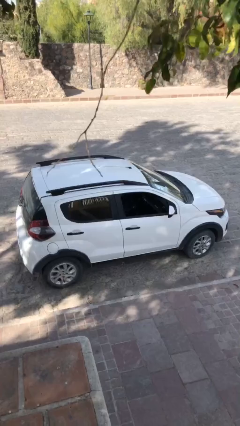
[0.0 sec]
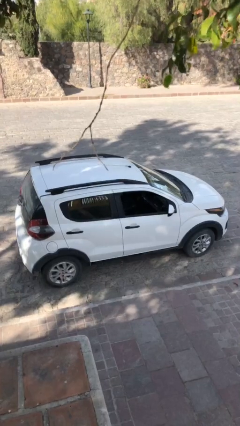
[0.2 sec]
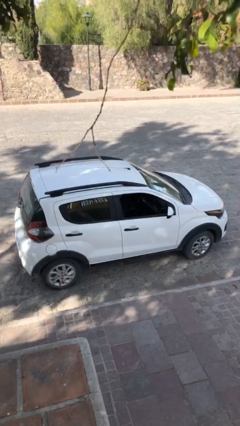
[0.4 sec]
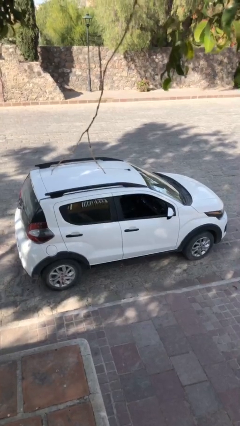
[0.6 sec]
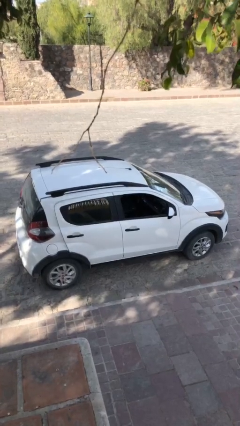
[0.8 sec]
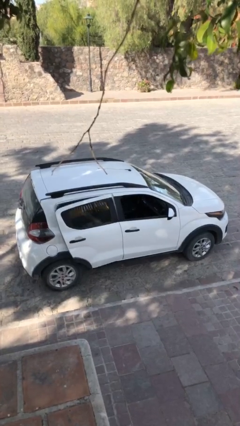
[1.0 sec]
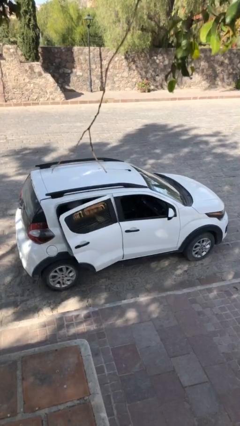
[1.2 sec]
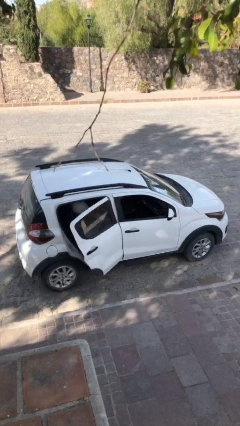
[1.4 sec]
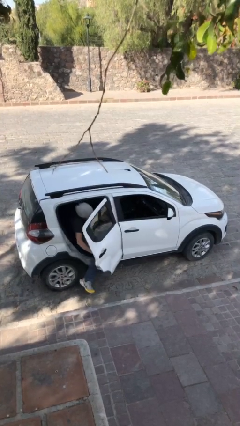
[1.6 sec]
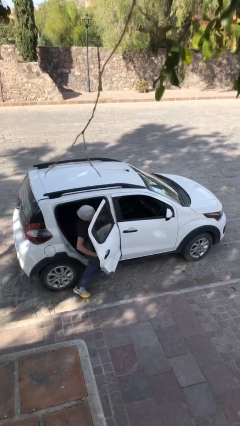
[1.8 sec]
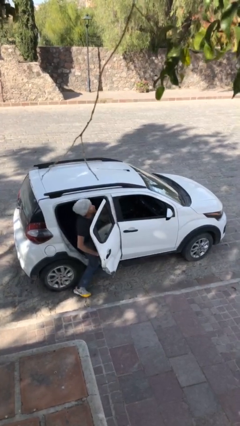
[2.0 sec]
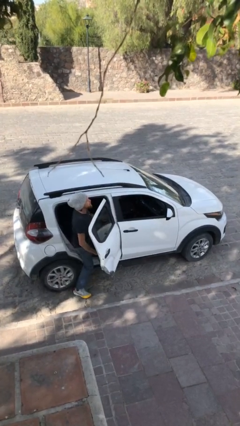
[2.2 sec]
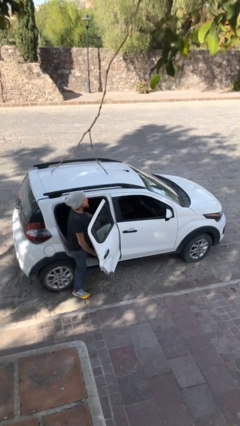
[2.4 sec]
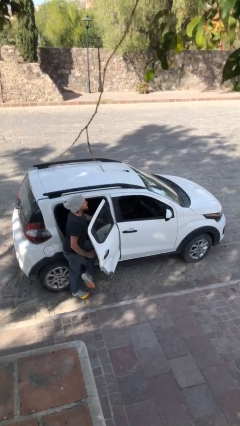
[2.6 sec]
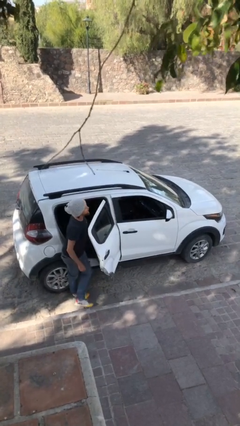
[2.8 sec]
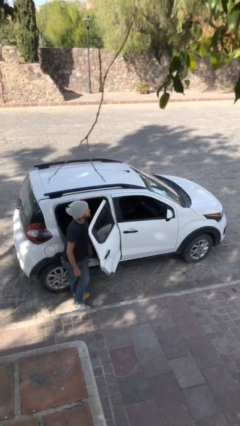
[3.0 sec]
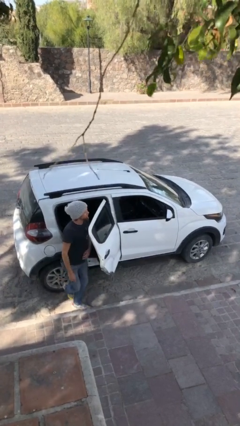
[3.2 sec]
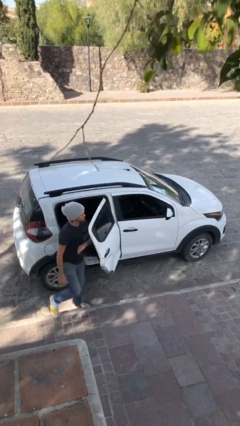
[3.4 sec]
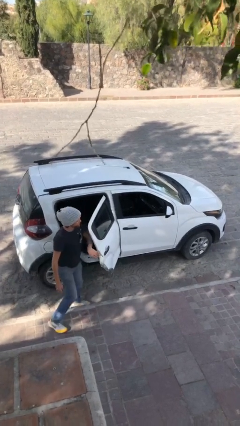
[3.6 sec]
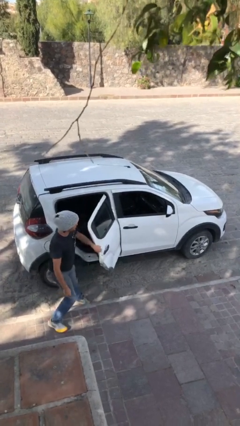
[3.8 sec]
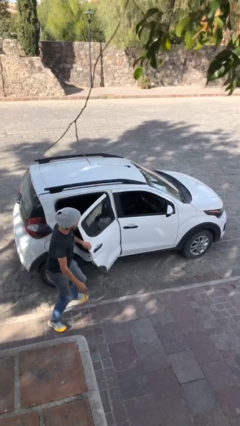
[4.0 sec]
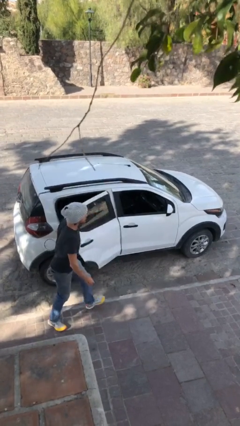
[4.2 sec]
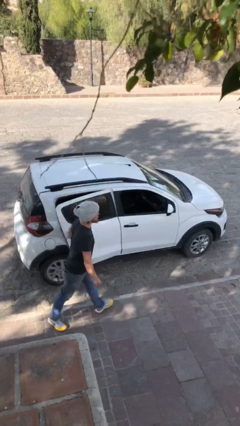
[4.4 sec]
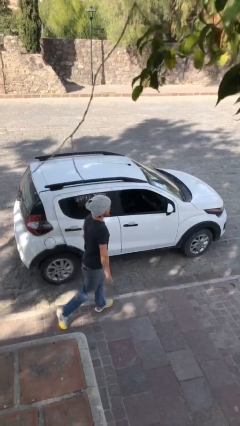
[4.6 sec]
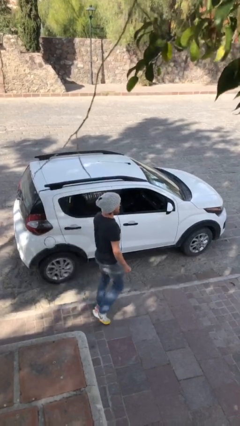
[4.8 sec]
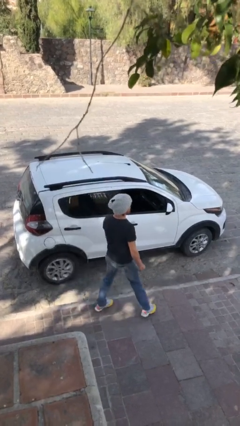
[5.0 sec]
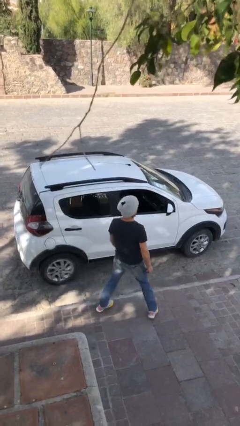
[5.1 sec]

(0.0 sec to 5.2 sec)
car drops off person

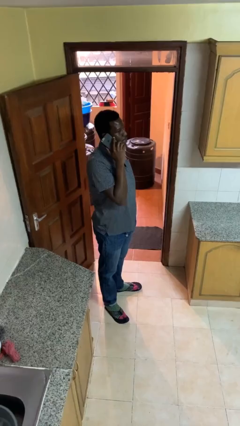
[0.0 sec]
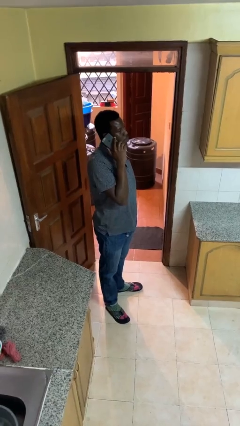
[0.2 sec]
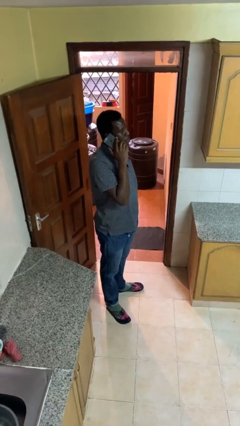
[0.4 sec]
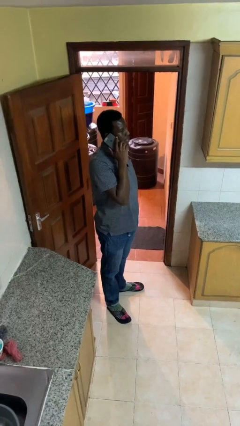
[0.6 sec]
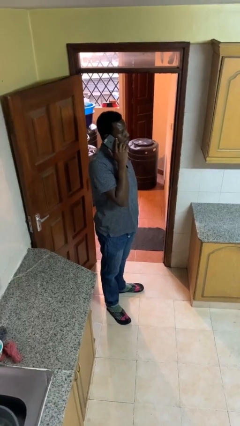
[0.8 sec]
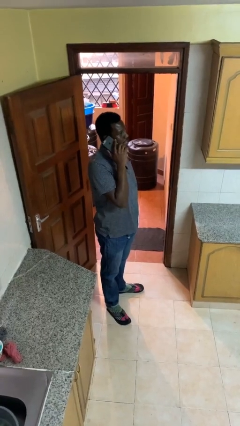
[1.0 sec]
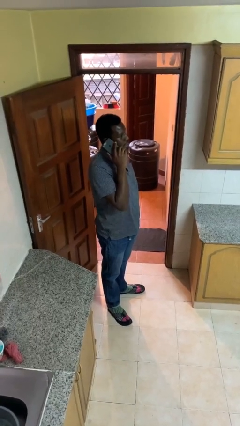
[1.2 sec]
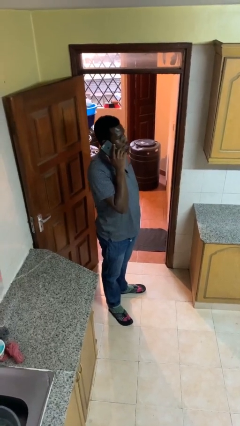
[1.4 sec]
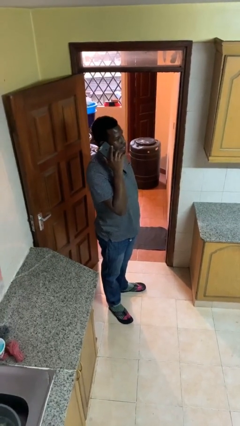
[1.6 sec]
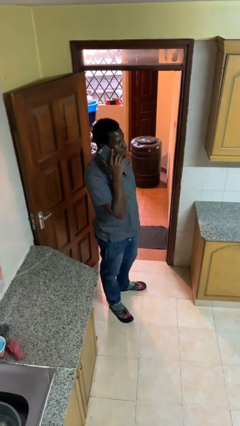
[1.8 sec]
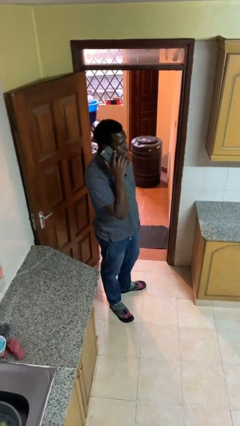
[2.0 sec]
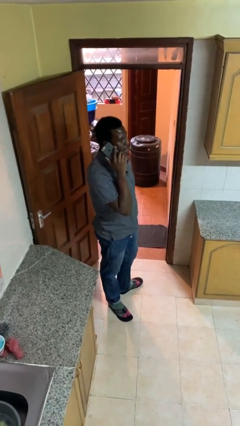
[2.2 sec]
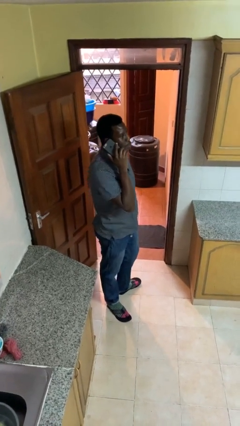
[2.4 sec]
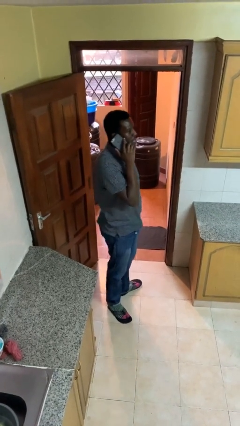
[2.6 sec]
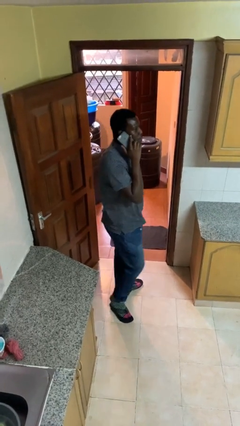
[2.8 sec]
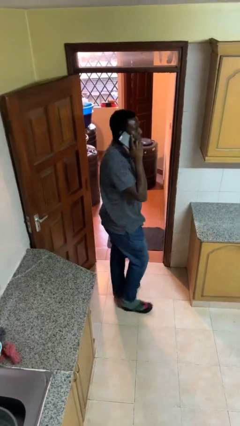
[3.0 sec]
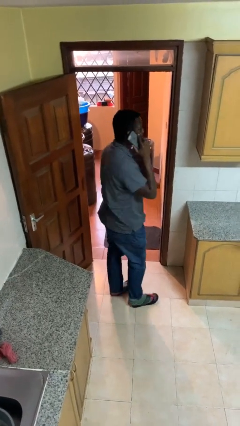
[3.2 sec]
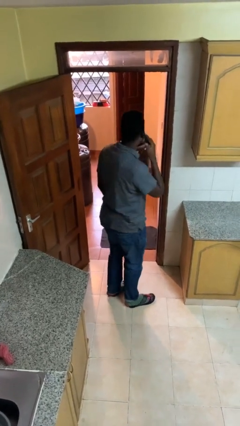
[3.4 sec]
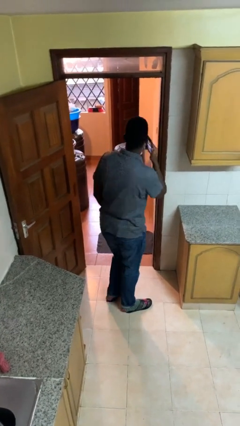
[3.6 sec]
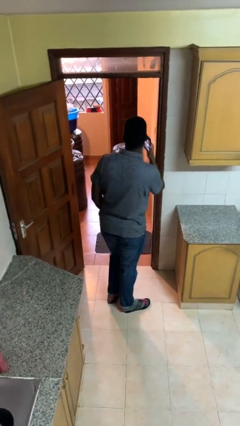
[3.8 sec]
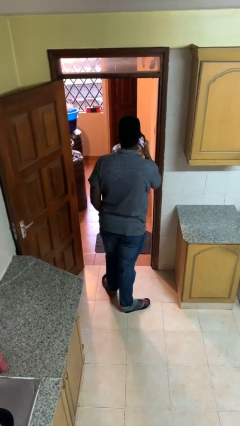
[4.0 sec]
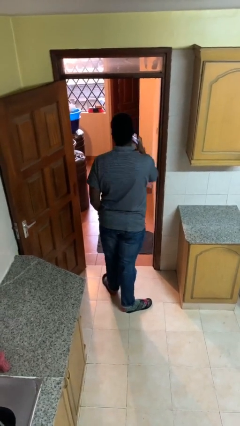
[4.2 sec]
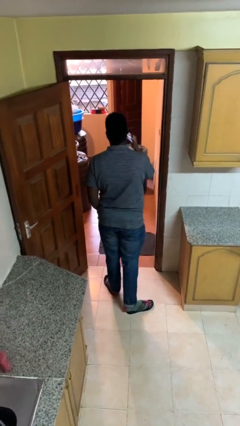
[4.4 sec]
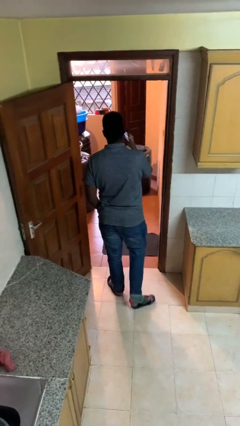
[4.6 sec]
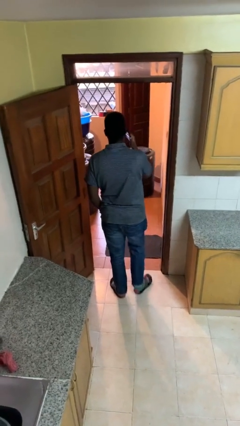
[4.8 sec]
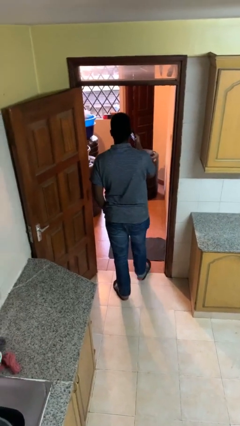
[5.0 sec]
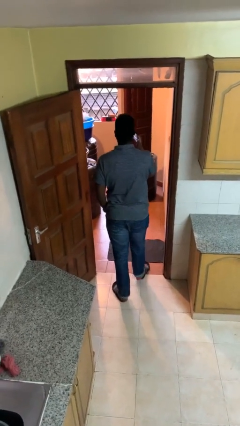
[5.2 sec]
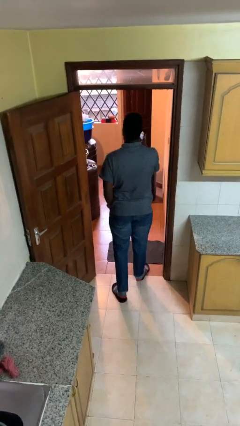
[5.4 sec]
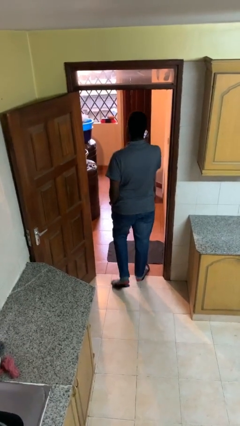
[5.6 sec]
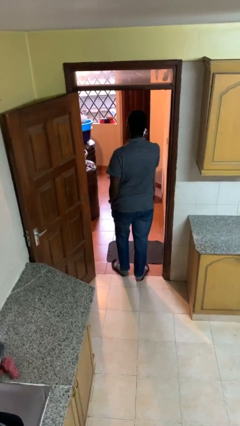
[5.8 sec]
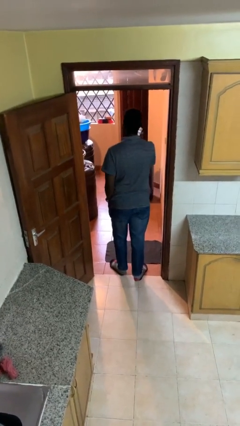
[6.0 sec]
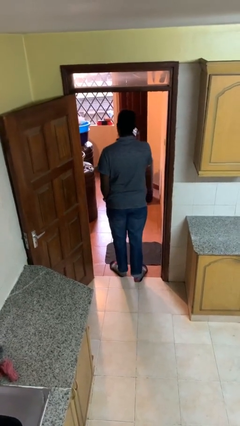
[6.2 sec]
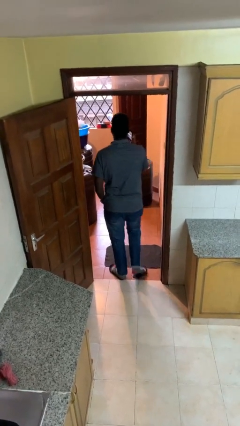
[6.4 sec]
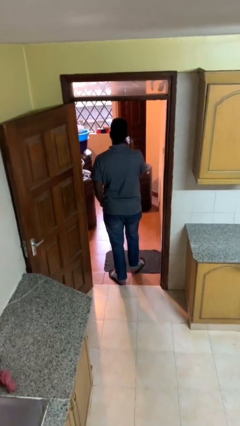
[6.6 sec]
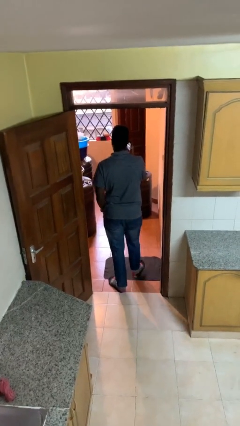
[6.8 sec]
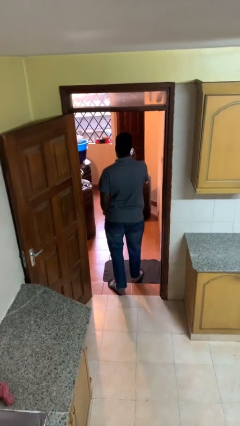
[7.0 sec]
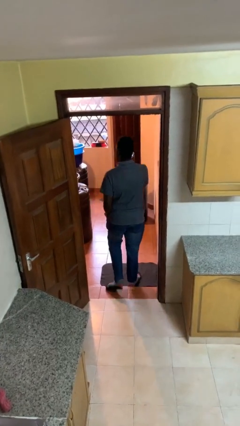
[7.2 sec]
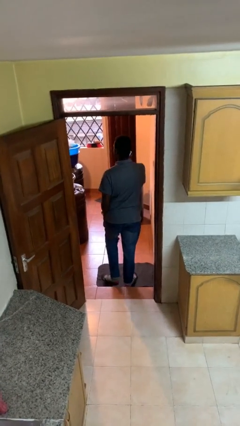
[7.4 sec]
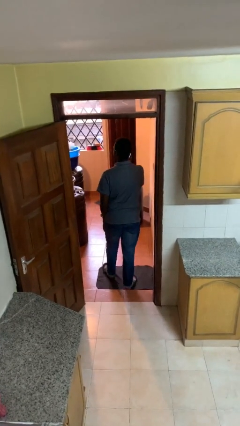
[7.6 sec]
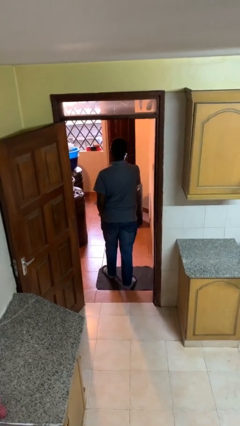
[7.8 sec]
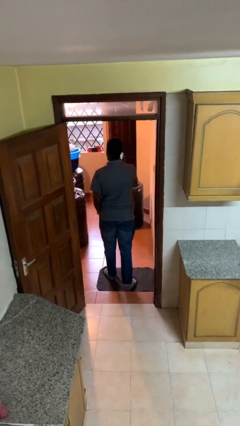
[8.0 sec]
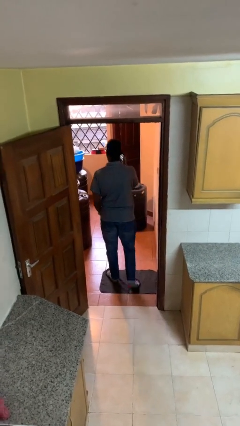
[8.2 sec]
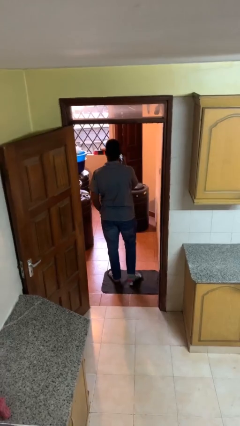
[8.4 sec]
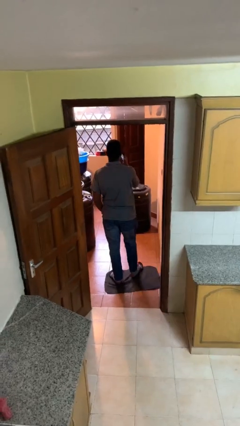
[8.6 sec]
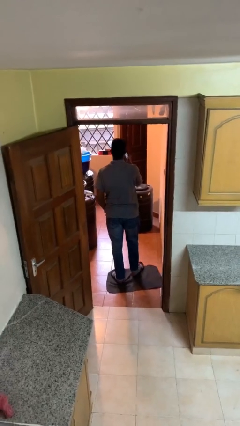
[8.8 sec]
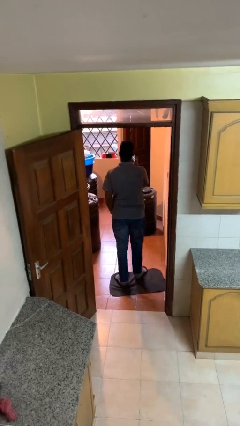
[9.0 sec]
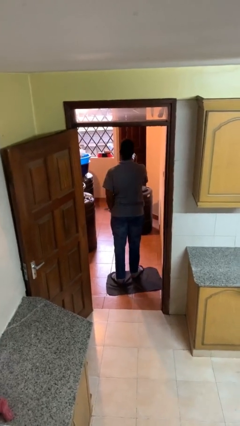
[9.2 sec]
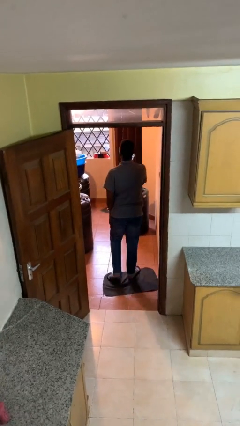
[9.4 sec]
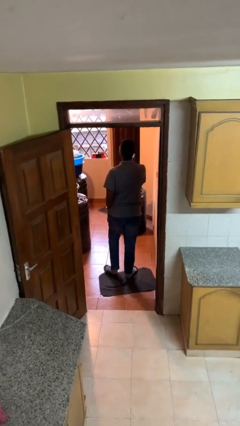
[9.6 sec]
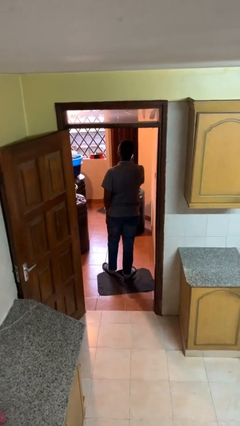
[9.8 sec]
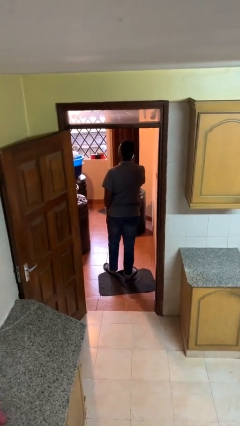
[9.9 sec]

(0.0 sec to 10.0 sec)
person exits scene through structure

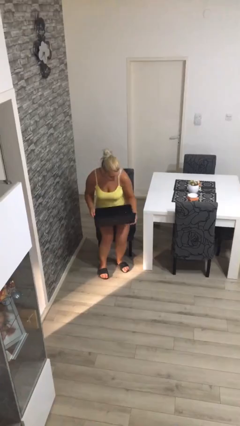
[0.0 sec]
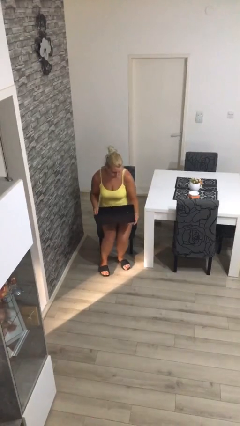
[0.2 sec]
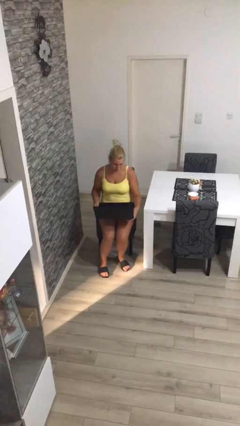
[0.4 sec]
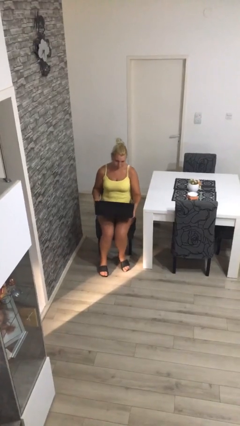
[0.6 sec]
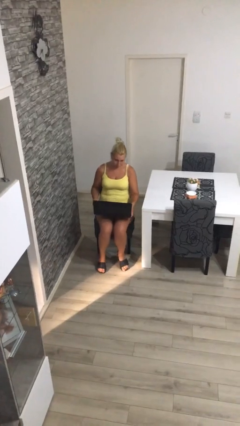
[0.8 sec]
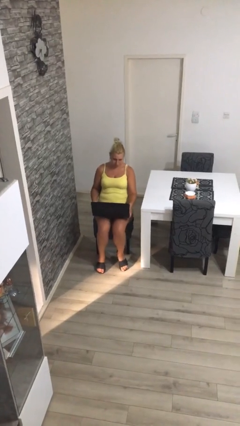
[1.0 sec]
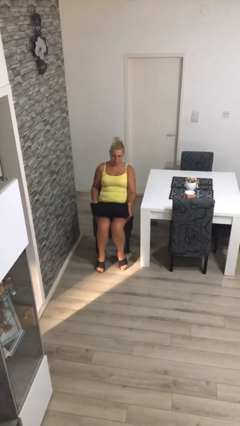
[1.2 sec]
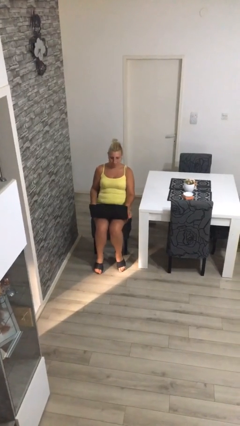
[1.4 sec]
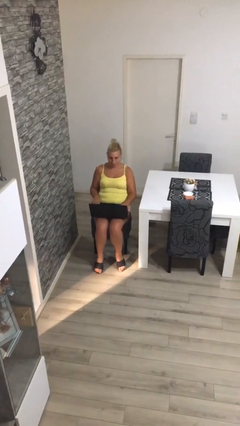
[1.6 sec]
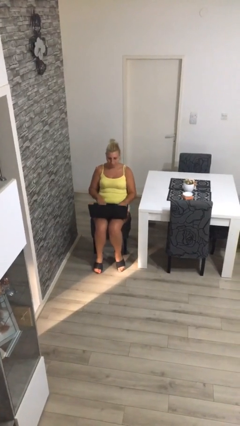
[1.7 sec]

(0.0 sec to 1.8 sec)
person sits down

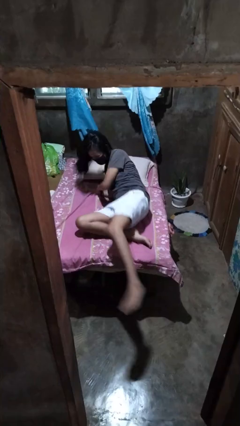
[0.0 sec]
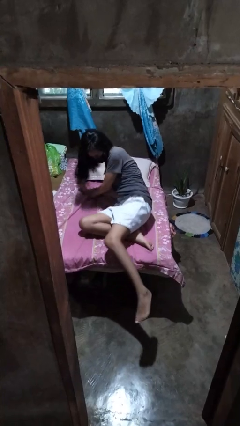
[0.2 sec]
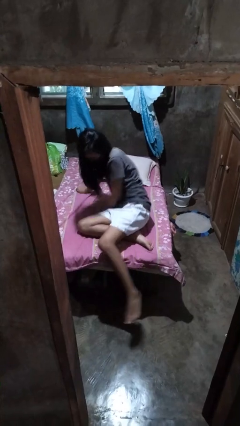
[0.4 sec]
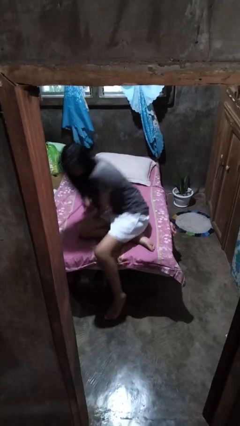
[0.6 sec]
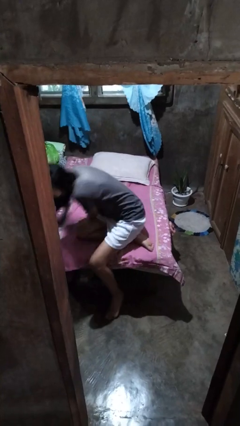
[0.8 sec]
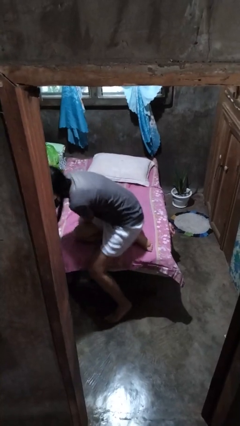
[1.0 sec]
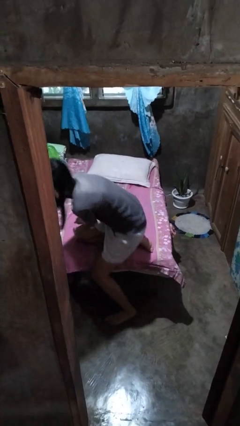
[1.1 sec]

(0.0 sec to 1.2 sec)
person stands up
